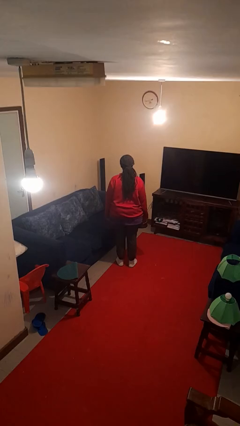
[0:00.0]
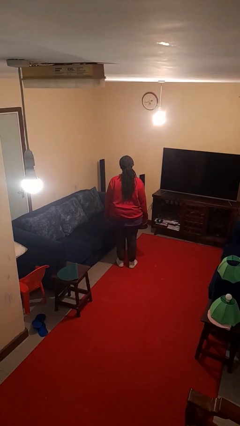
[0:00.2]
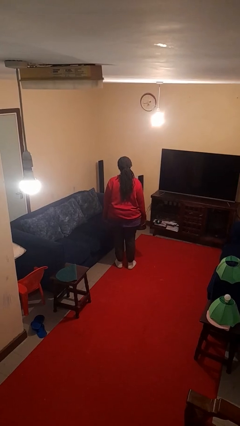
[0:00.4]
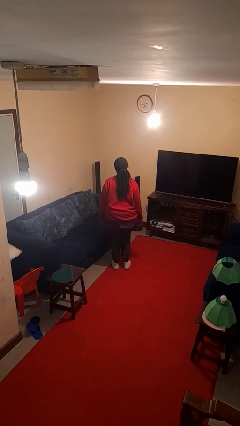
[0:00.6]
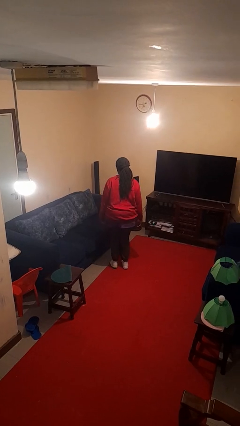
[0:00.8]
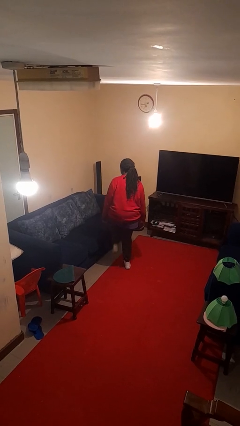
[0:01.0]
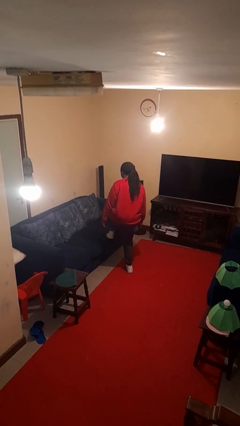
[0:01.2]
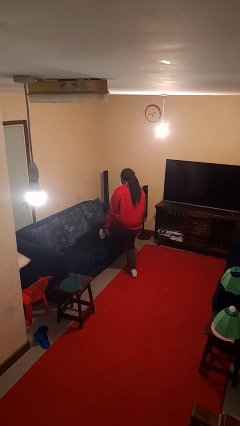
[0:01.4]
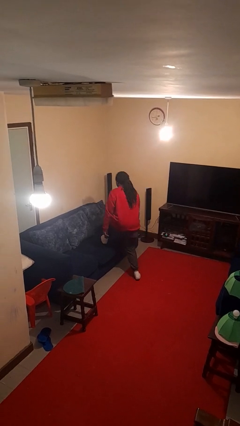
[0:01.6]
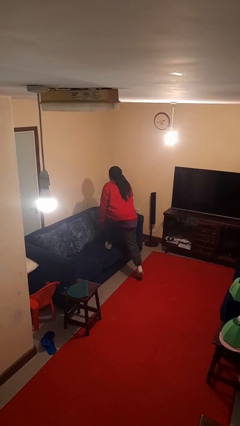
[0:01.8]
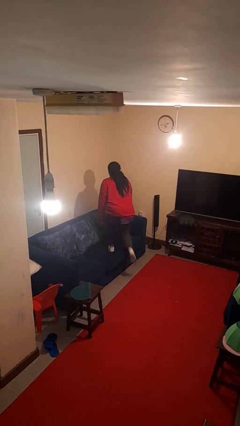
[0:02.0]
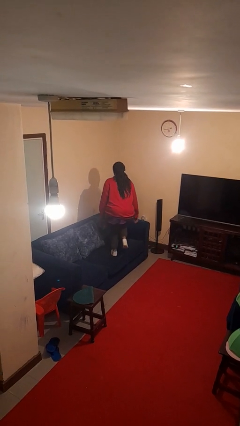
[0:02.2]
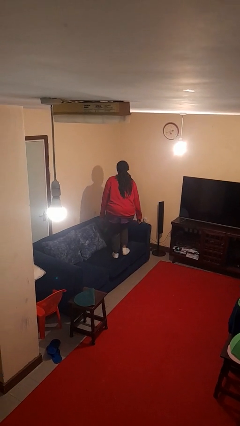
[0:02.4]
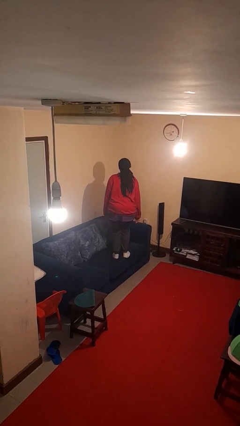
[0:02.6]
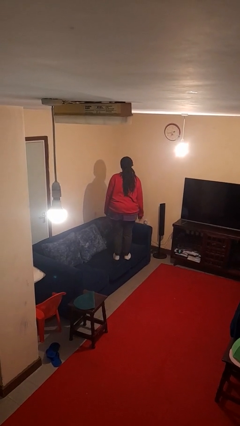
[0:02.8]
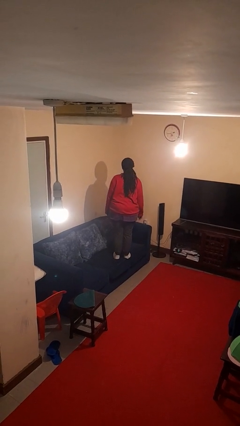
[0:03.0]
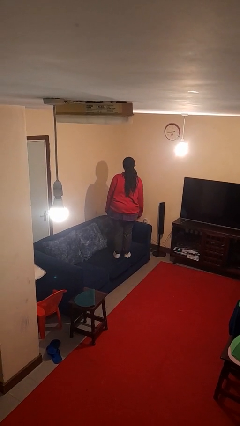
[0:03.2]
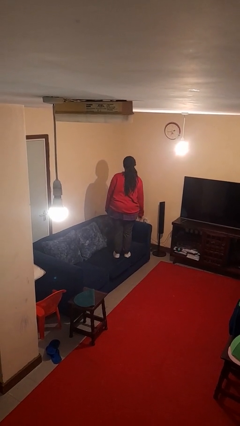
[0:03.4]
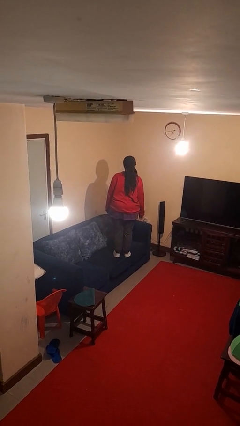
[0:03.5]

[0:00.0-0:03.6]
person climbs on couch

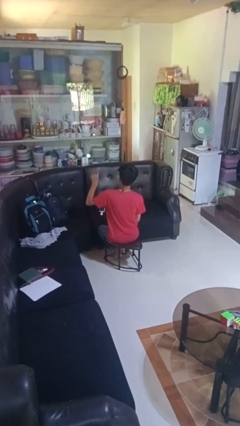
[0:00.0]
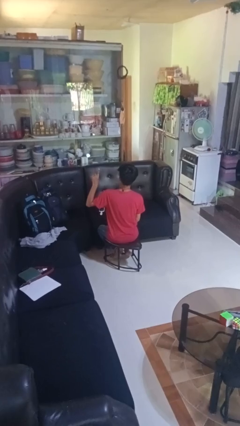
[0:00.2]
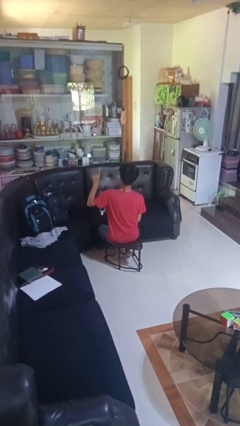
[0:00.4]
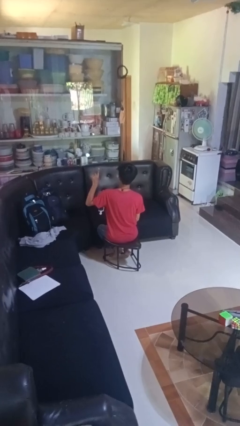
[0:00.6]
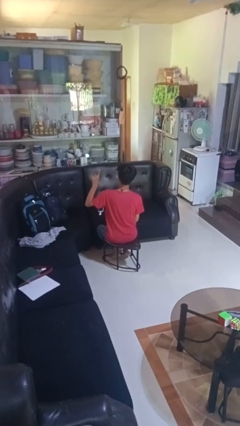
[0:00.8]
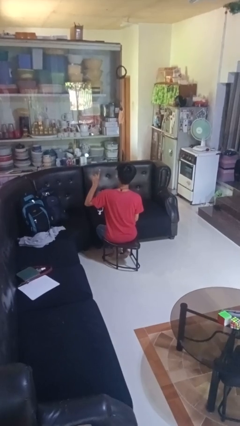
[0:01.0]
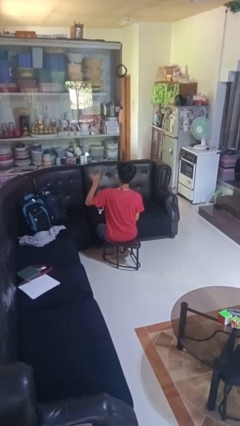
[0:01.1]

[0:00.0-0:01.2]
person gestures number one

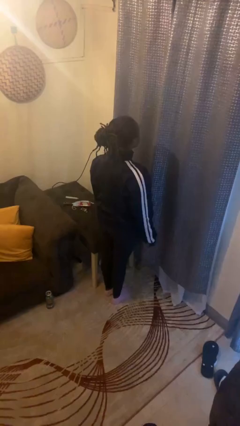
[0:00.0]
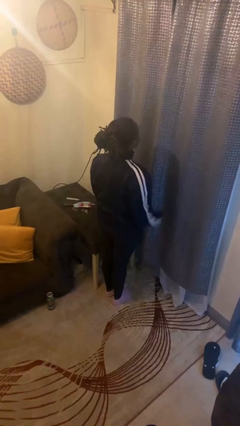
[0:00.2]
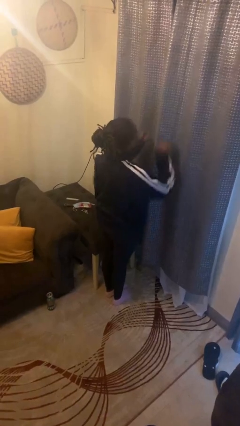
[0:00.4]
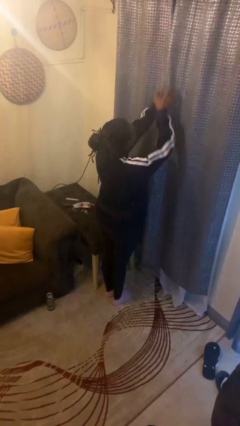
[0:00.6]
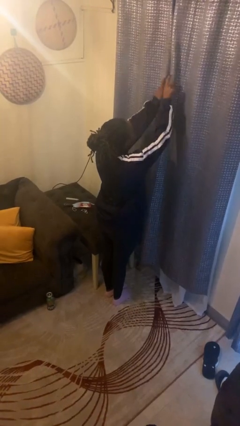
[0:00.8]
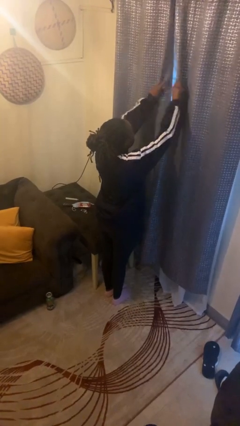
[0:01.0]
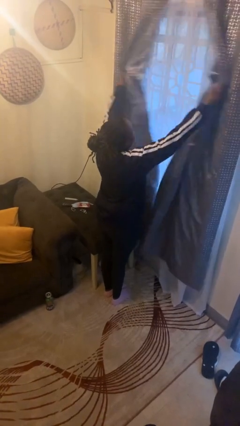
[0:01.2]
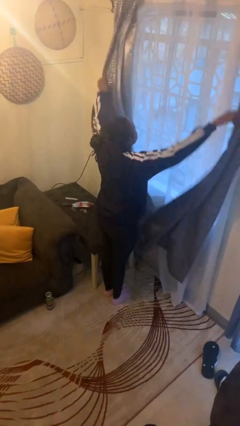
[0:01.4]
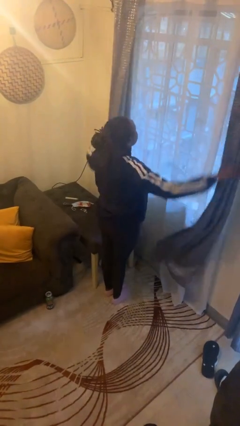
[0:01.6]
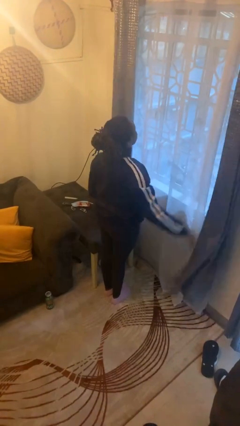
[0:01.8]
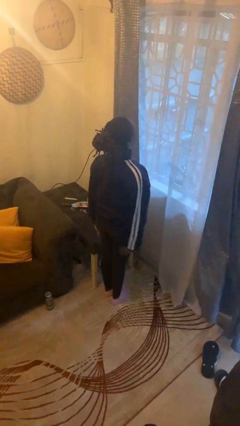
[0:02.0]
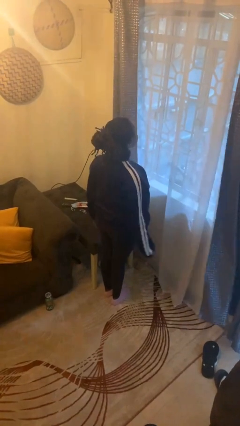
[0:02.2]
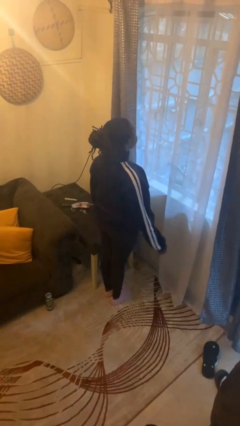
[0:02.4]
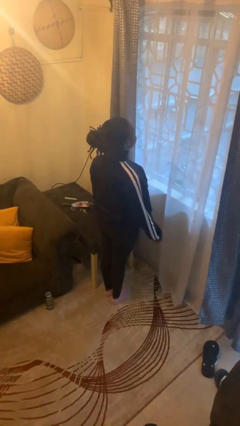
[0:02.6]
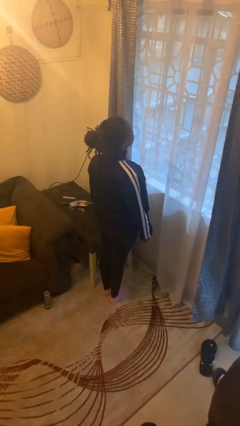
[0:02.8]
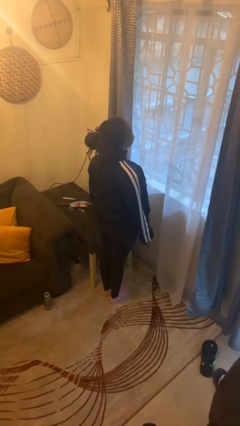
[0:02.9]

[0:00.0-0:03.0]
person opens curtains

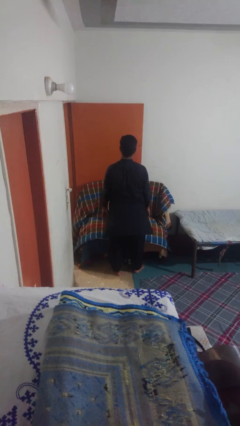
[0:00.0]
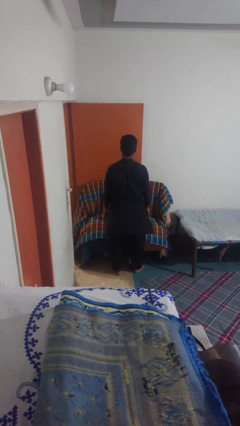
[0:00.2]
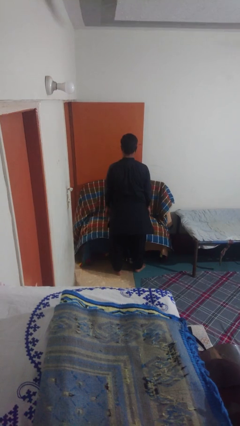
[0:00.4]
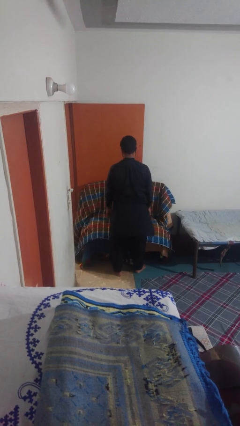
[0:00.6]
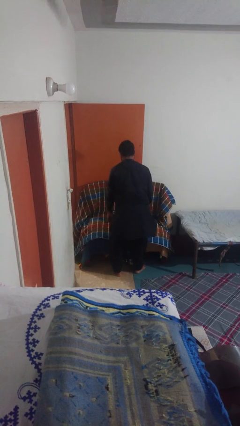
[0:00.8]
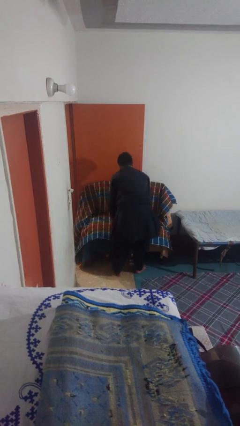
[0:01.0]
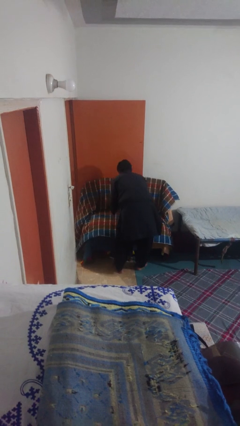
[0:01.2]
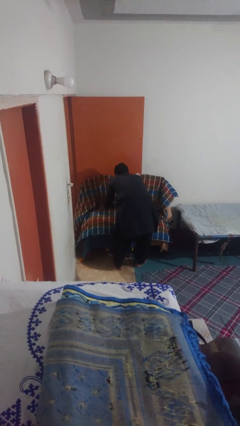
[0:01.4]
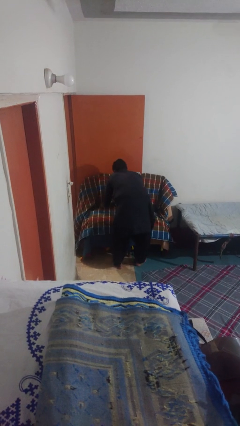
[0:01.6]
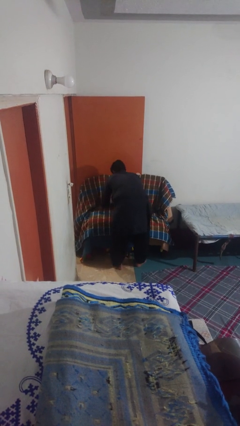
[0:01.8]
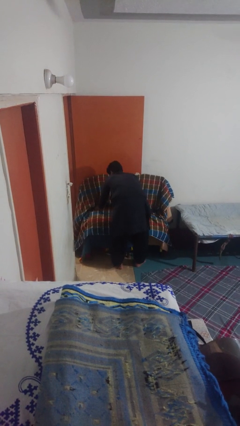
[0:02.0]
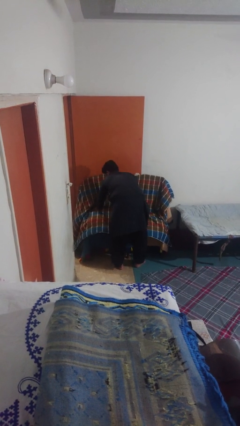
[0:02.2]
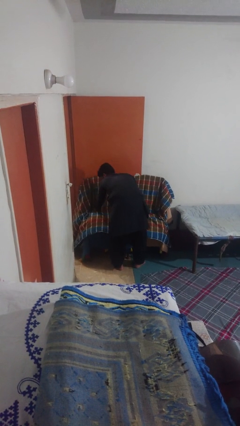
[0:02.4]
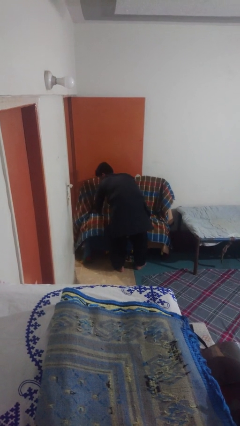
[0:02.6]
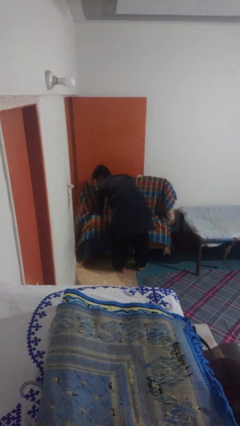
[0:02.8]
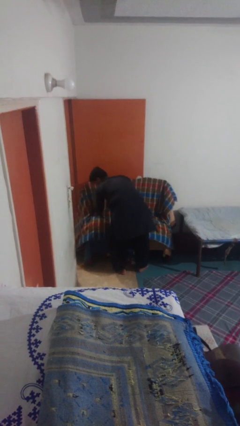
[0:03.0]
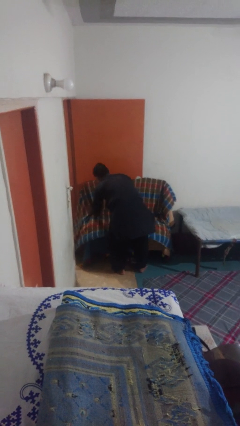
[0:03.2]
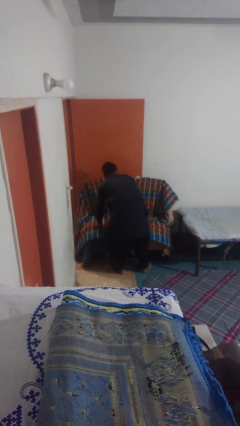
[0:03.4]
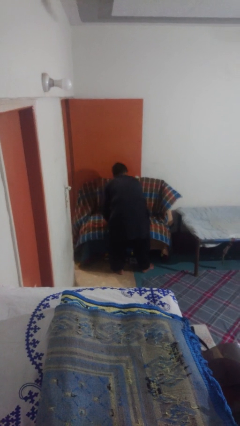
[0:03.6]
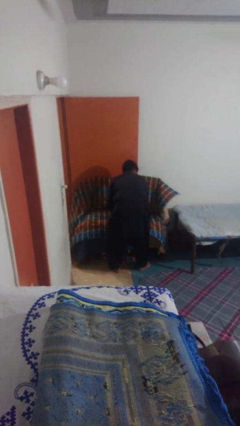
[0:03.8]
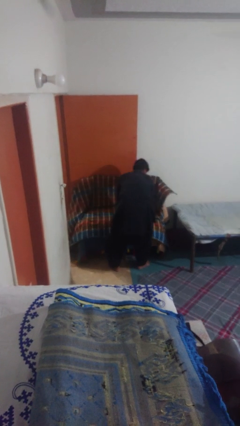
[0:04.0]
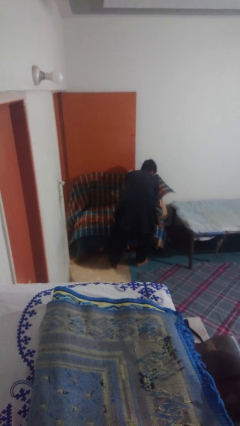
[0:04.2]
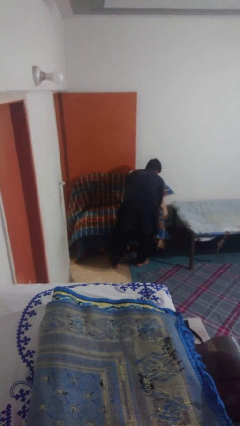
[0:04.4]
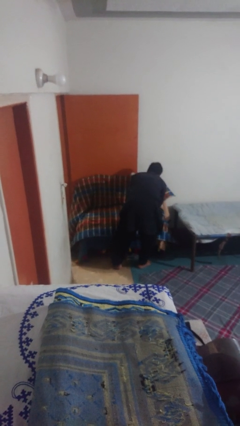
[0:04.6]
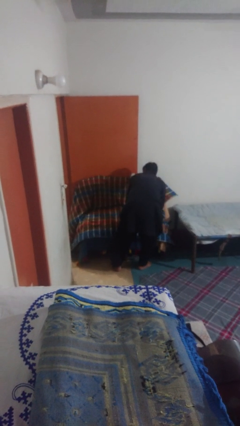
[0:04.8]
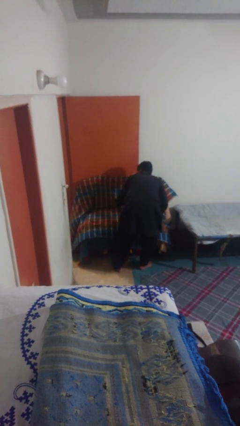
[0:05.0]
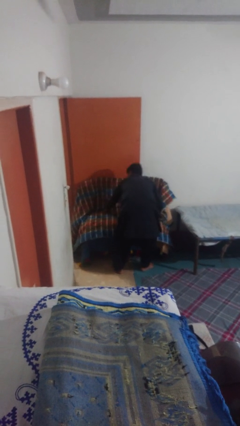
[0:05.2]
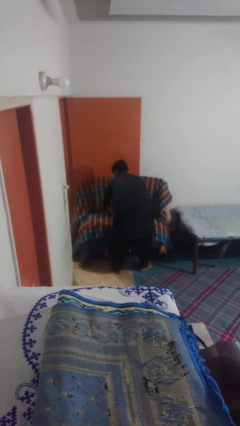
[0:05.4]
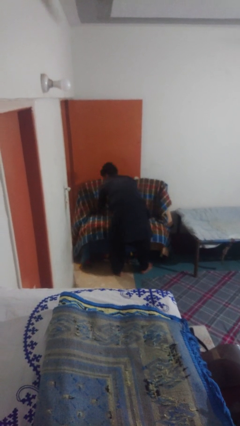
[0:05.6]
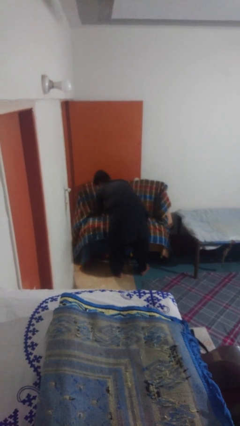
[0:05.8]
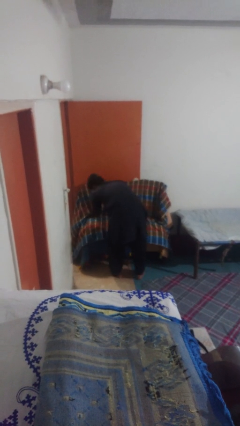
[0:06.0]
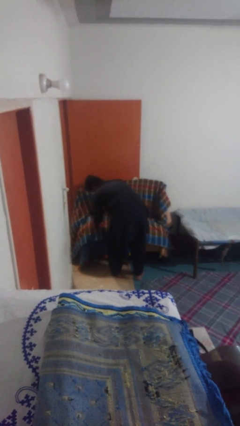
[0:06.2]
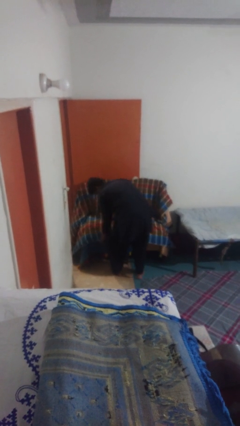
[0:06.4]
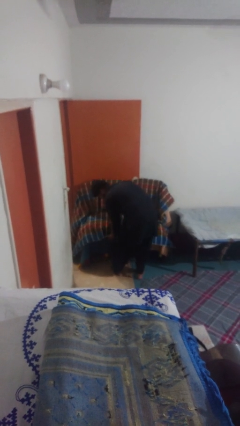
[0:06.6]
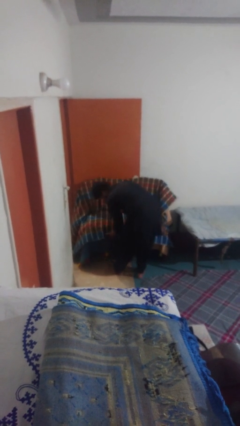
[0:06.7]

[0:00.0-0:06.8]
person searches in couch

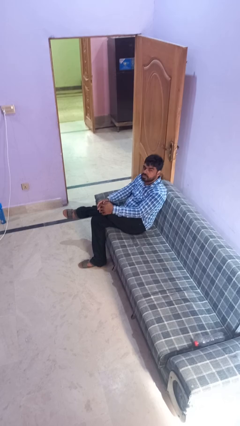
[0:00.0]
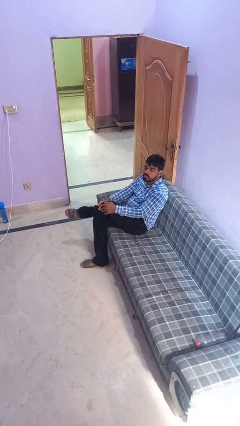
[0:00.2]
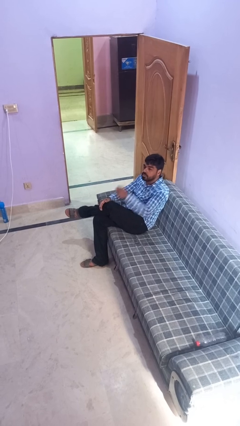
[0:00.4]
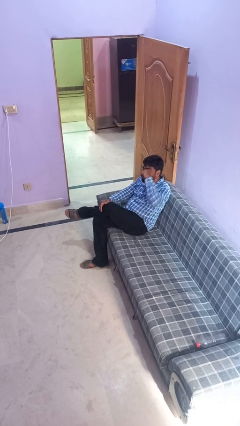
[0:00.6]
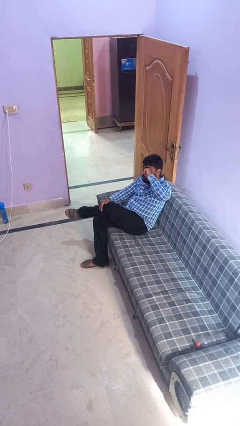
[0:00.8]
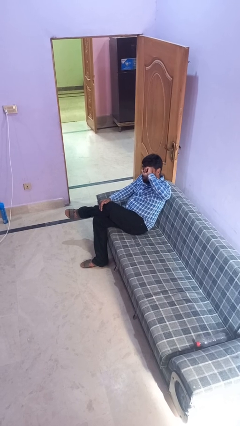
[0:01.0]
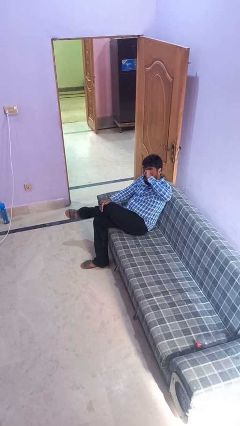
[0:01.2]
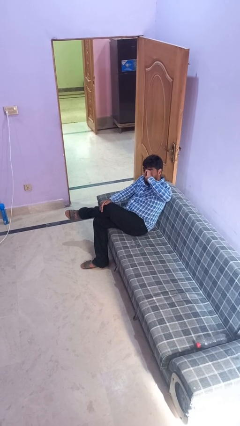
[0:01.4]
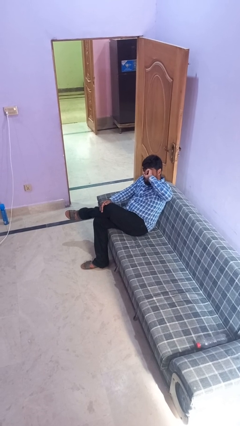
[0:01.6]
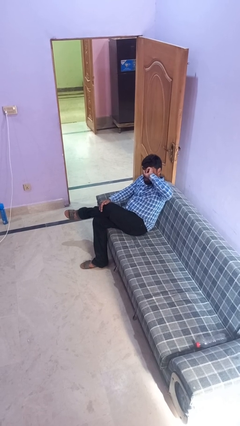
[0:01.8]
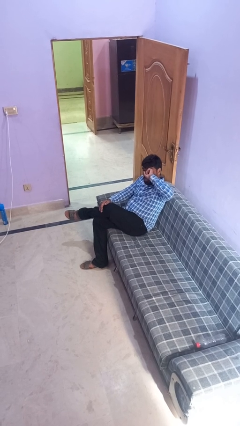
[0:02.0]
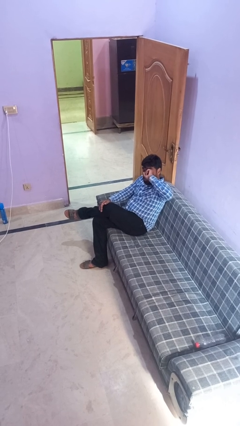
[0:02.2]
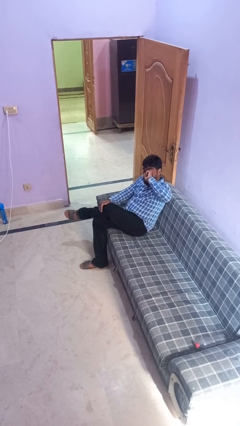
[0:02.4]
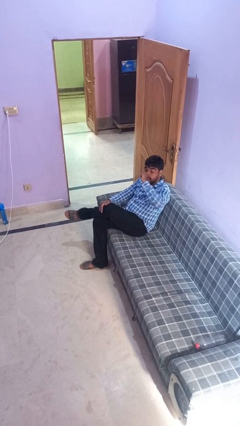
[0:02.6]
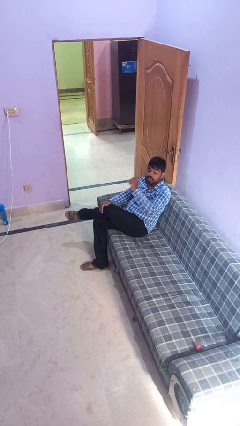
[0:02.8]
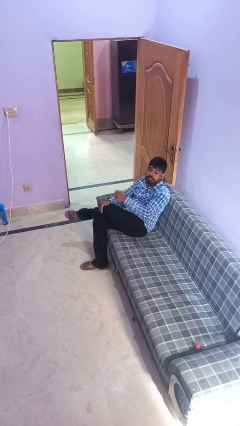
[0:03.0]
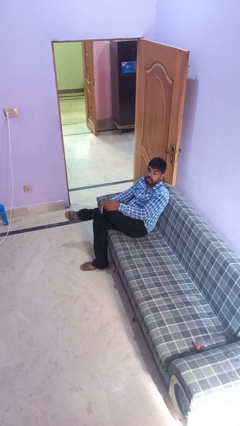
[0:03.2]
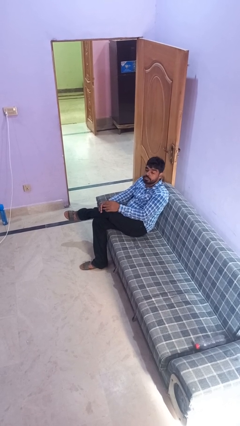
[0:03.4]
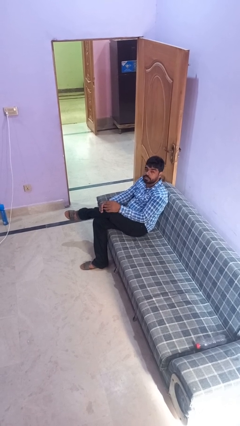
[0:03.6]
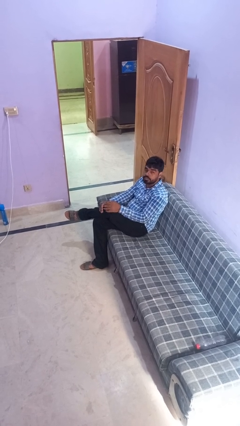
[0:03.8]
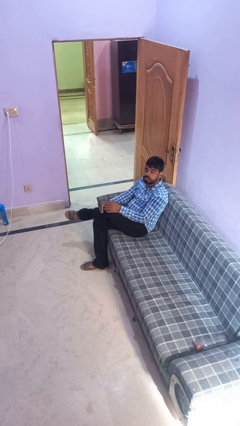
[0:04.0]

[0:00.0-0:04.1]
person rubs eyes
